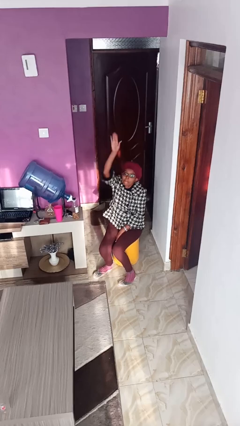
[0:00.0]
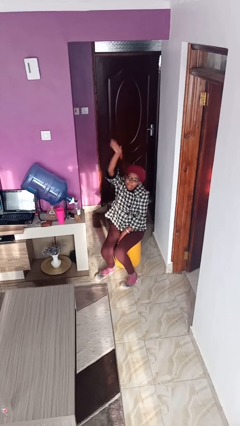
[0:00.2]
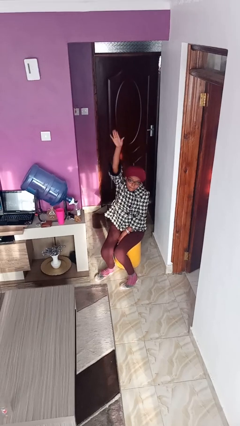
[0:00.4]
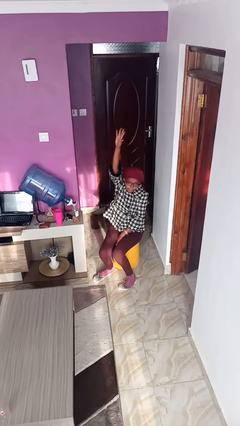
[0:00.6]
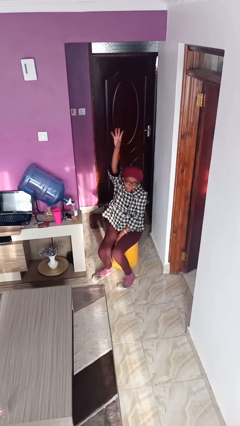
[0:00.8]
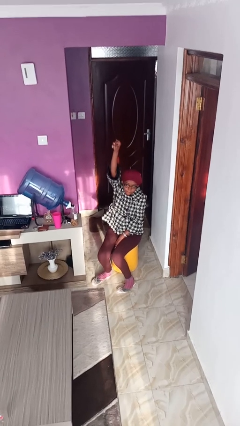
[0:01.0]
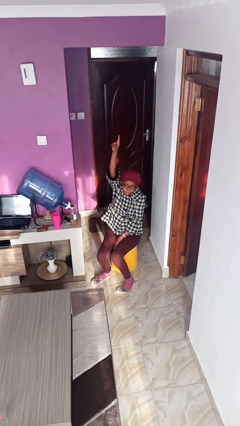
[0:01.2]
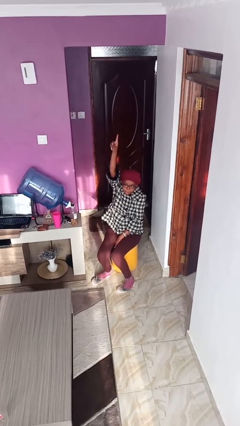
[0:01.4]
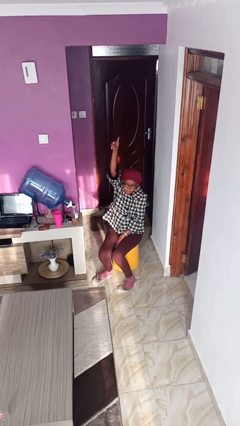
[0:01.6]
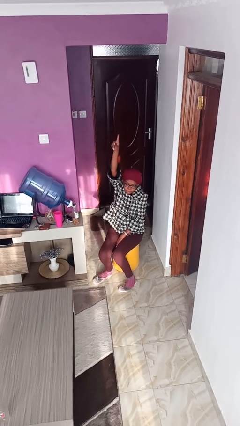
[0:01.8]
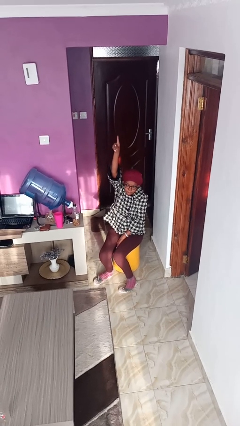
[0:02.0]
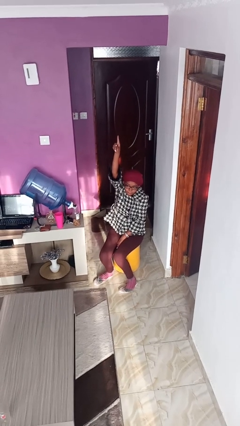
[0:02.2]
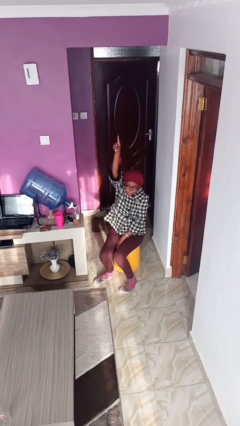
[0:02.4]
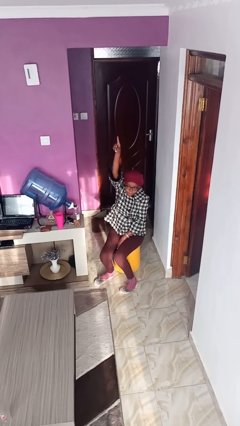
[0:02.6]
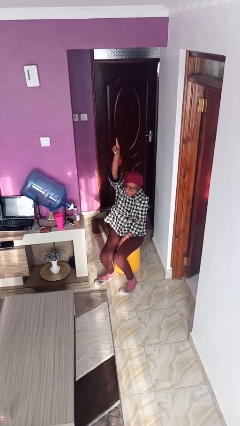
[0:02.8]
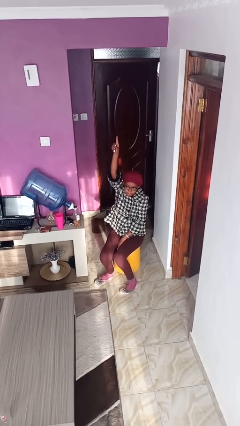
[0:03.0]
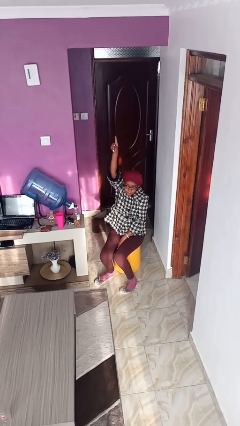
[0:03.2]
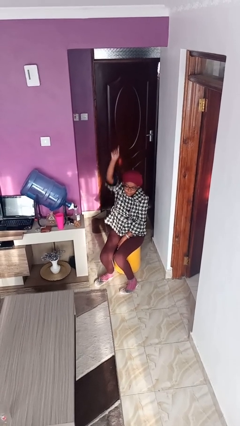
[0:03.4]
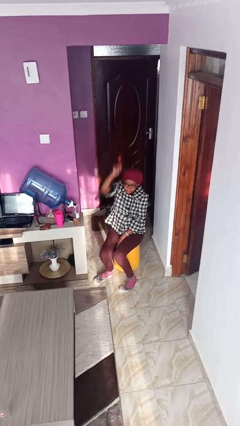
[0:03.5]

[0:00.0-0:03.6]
person gestures raise hand

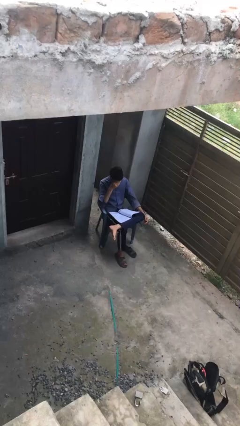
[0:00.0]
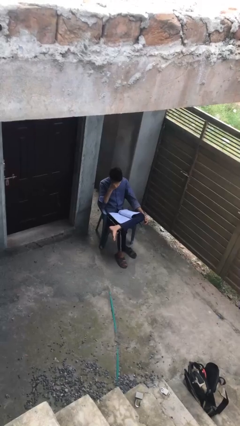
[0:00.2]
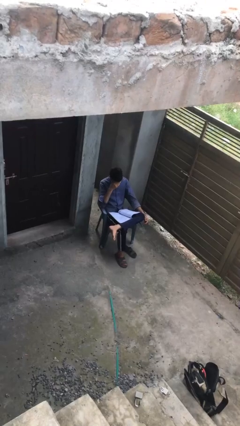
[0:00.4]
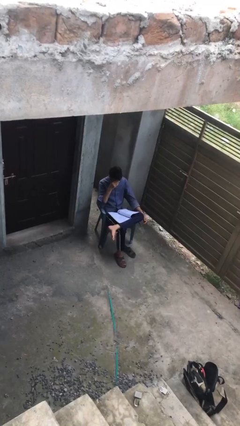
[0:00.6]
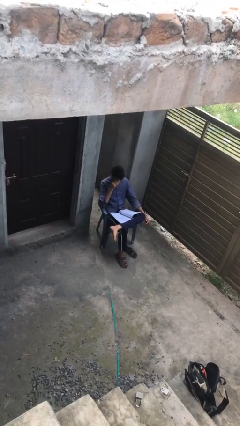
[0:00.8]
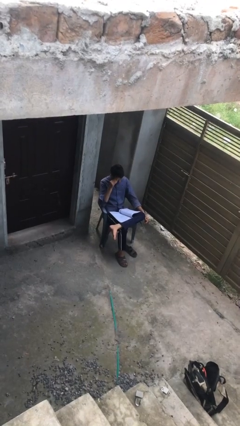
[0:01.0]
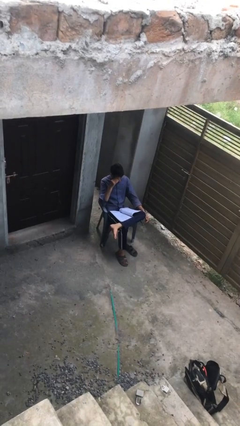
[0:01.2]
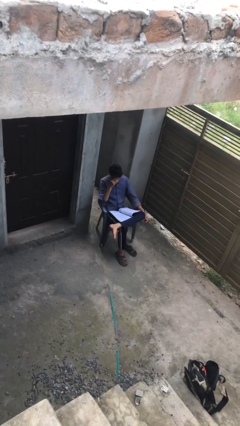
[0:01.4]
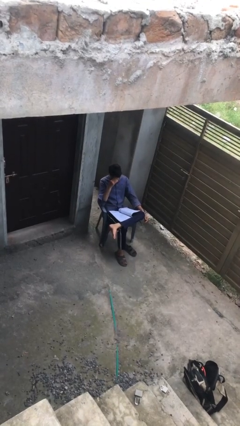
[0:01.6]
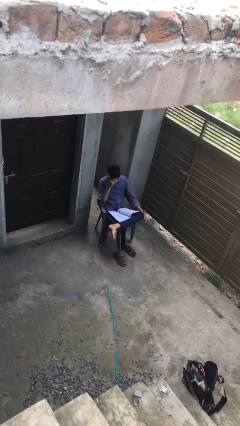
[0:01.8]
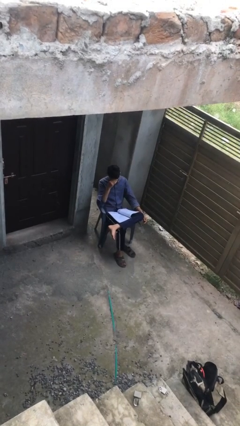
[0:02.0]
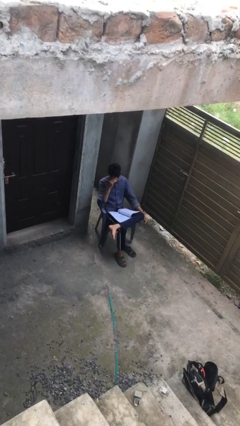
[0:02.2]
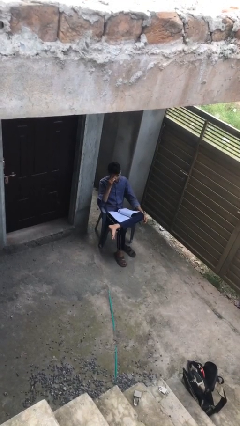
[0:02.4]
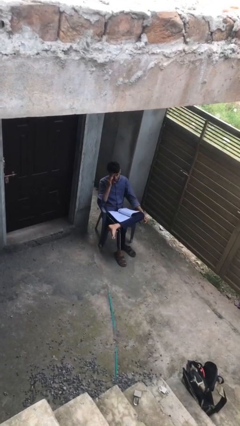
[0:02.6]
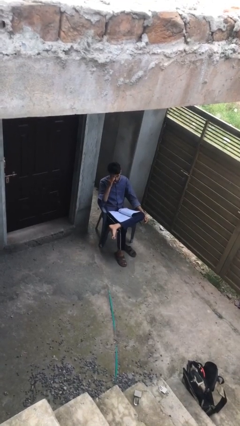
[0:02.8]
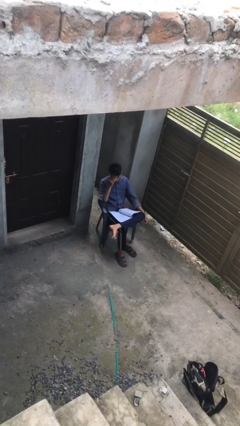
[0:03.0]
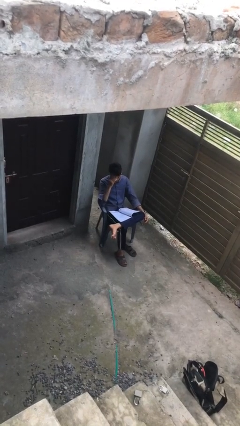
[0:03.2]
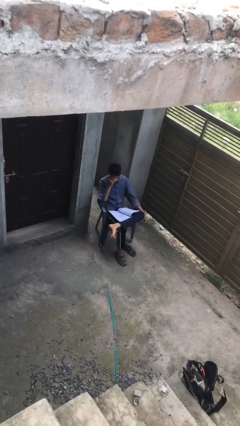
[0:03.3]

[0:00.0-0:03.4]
person reads document

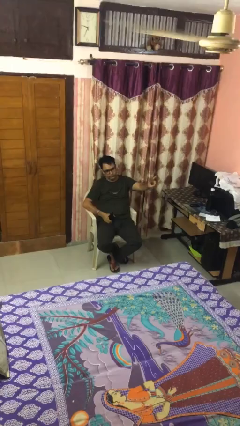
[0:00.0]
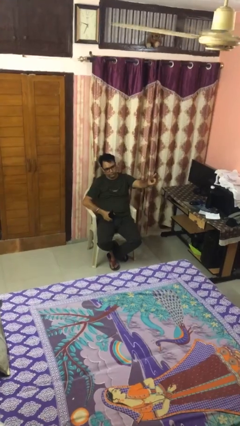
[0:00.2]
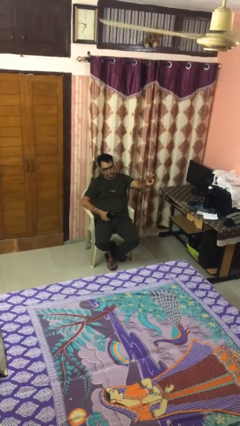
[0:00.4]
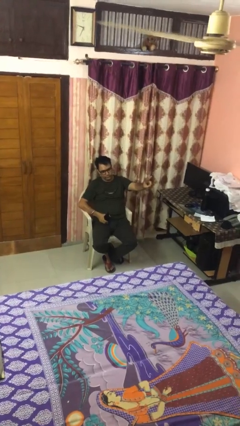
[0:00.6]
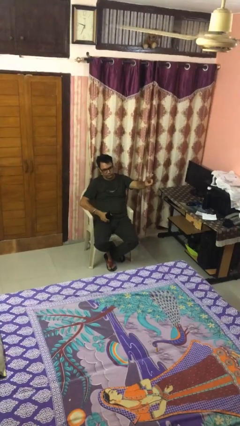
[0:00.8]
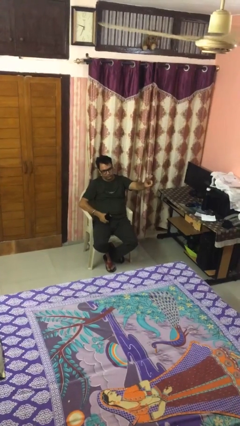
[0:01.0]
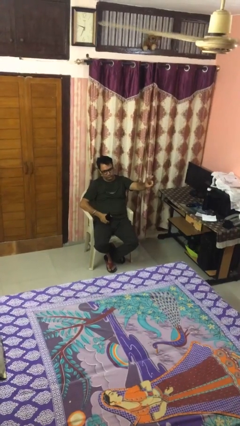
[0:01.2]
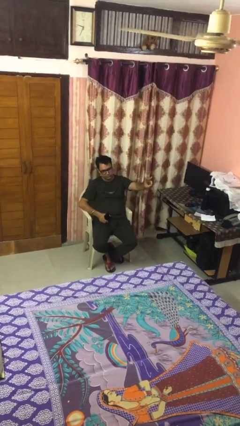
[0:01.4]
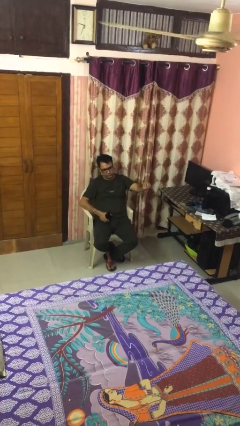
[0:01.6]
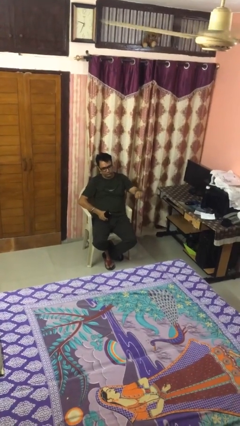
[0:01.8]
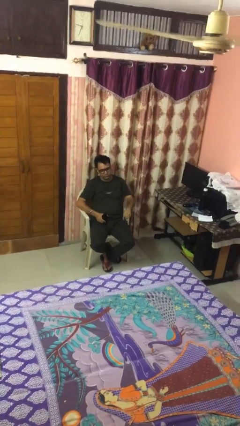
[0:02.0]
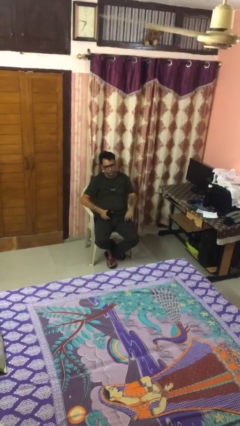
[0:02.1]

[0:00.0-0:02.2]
person gestures peace

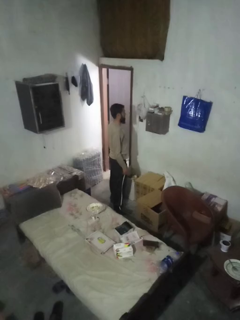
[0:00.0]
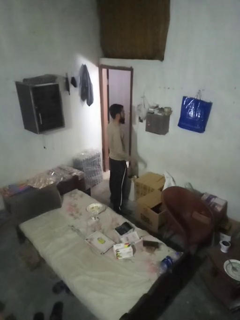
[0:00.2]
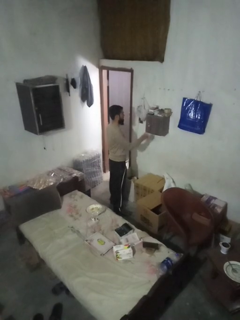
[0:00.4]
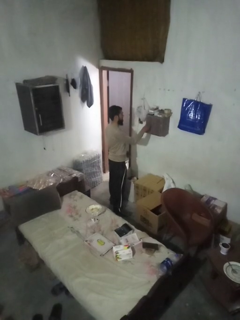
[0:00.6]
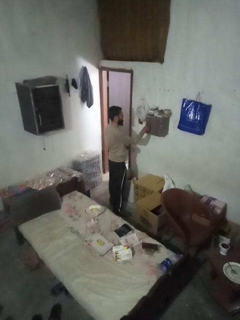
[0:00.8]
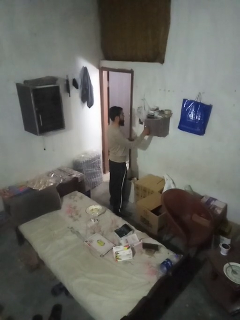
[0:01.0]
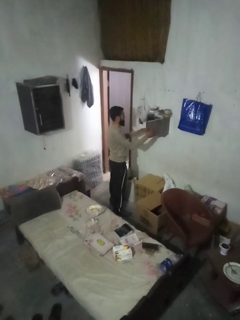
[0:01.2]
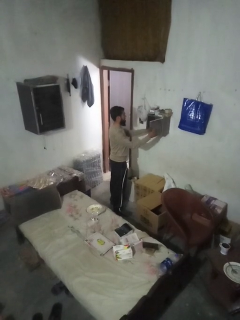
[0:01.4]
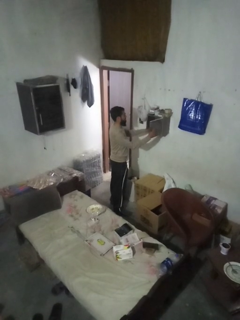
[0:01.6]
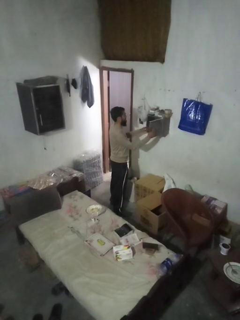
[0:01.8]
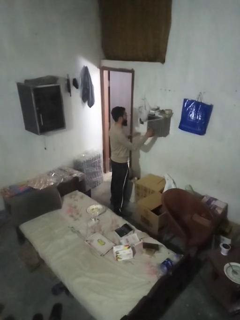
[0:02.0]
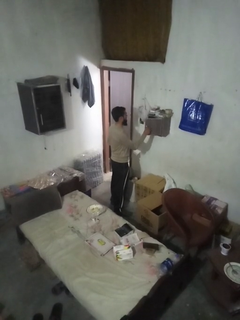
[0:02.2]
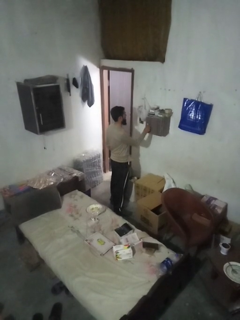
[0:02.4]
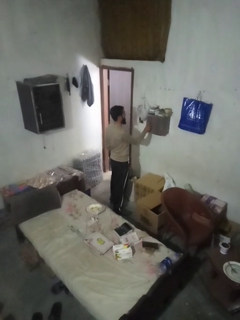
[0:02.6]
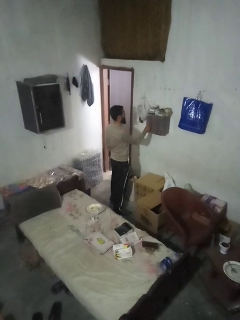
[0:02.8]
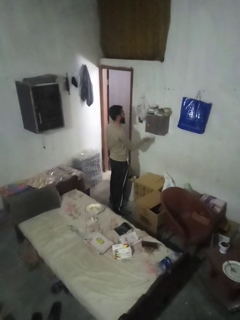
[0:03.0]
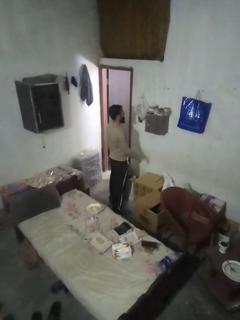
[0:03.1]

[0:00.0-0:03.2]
person takes letters from mailbox

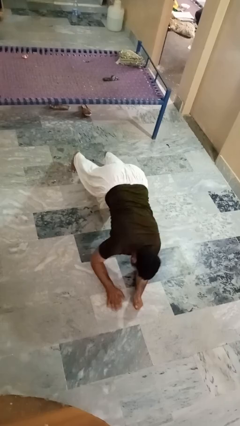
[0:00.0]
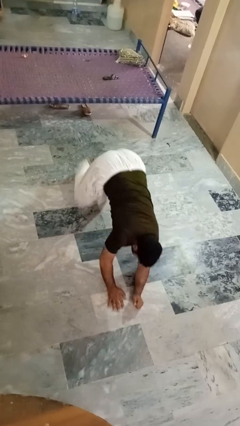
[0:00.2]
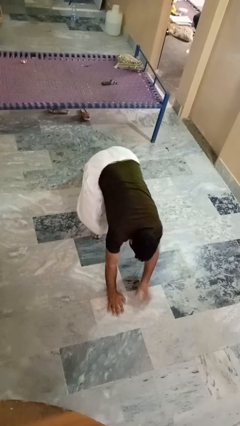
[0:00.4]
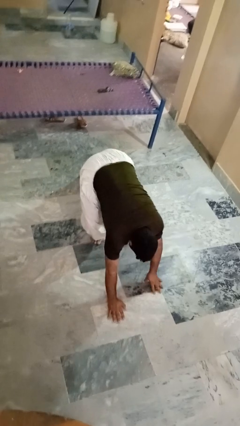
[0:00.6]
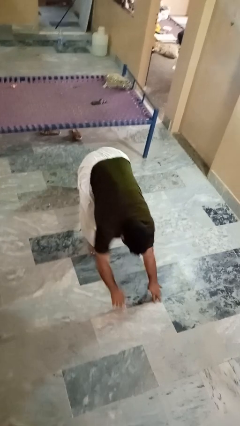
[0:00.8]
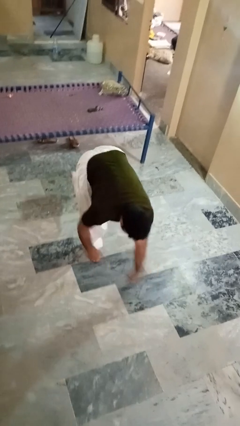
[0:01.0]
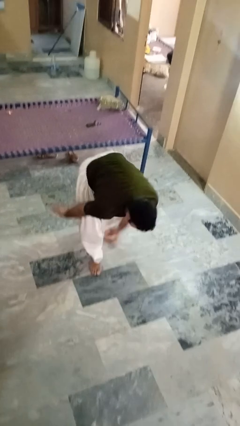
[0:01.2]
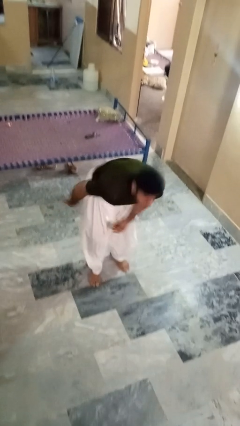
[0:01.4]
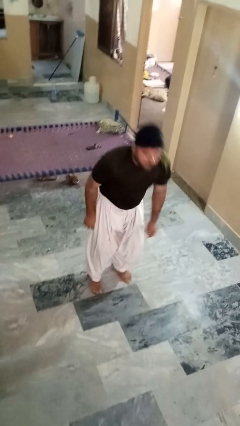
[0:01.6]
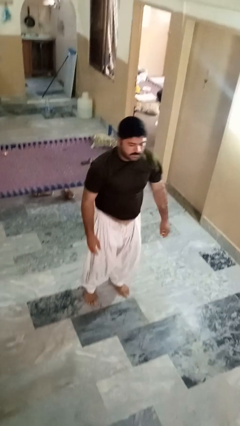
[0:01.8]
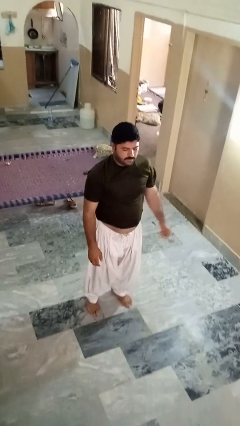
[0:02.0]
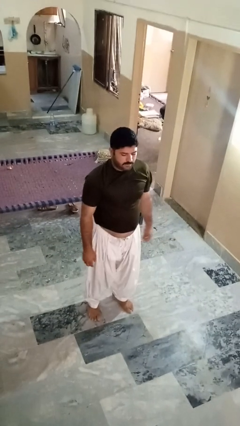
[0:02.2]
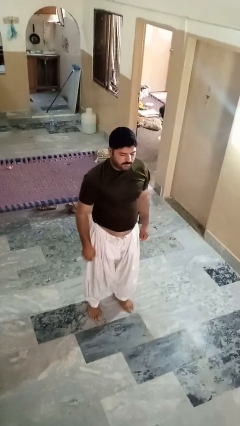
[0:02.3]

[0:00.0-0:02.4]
person stands up from floor

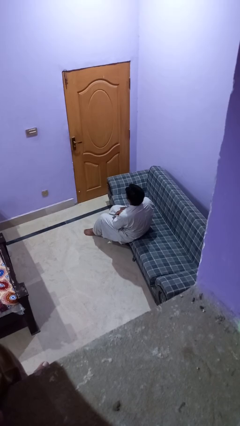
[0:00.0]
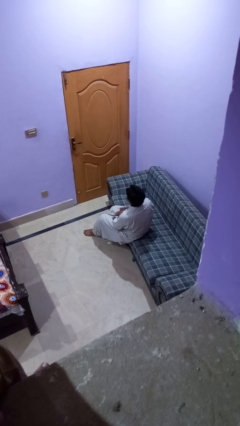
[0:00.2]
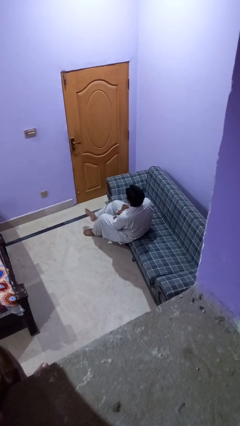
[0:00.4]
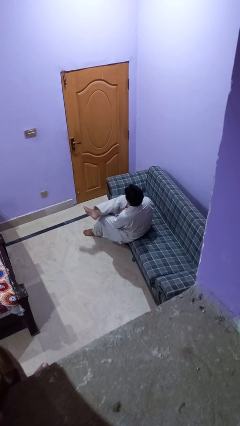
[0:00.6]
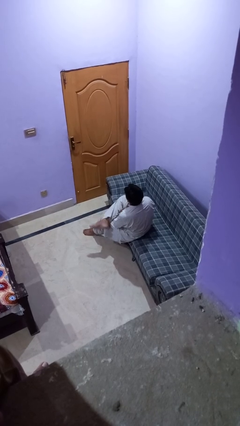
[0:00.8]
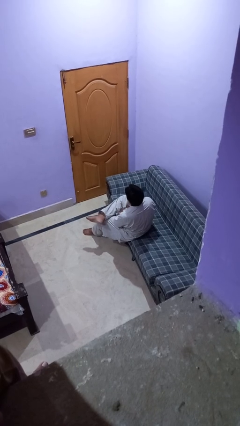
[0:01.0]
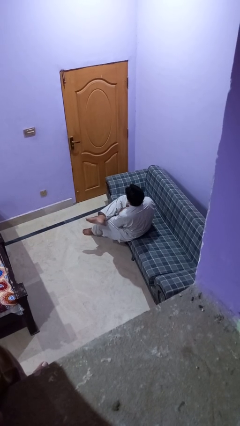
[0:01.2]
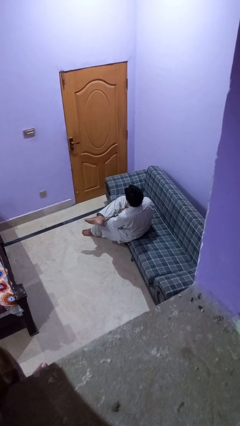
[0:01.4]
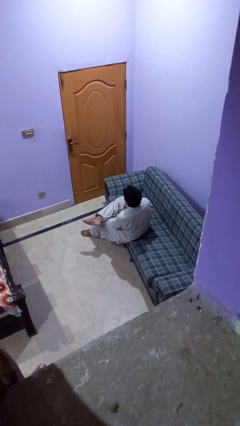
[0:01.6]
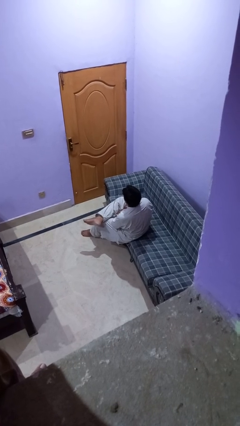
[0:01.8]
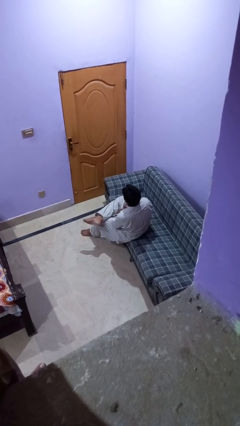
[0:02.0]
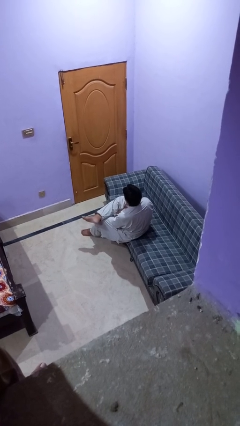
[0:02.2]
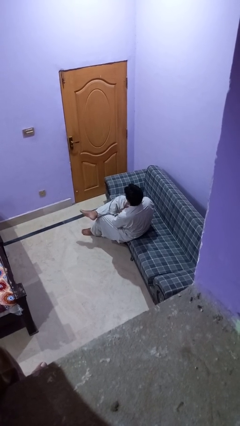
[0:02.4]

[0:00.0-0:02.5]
person crosses legs

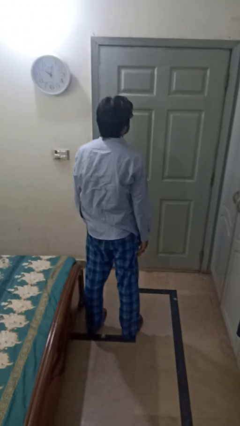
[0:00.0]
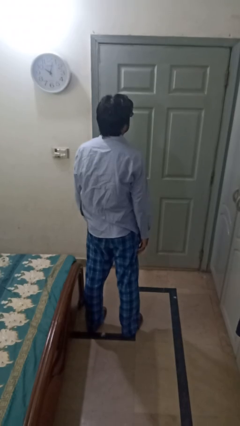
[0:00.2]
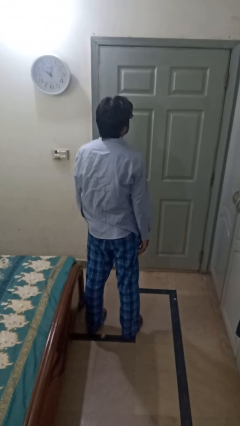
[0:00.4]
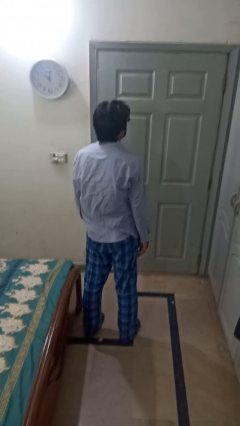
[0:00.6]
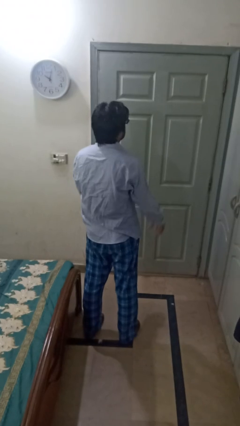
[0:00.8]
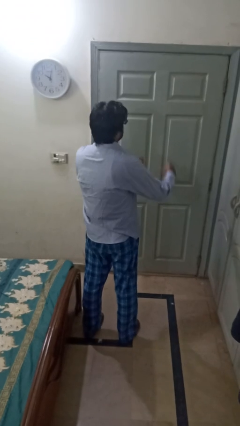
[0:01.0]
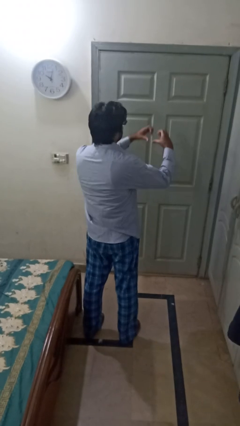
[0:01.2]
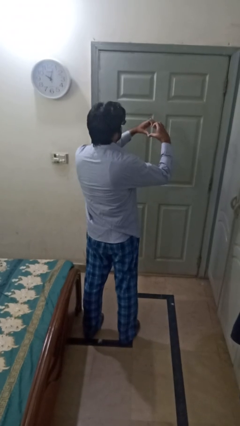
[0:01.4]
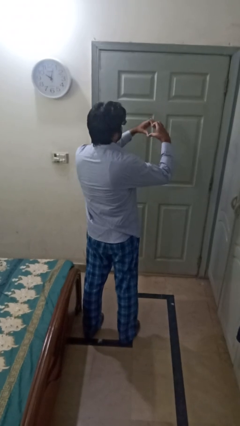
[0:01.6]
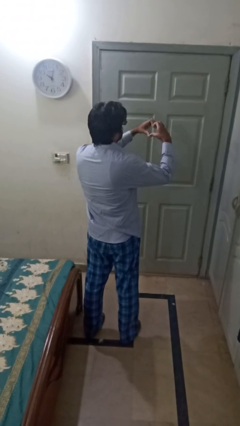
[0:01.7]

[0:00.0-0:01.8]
person gestures heart
